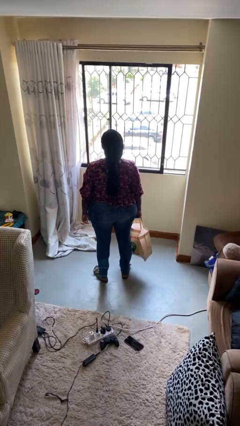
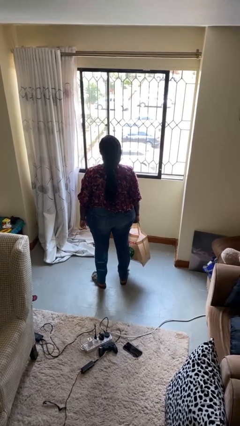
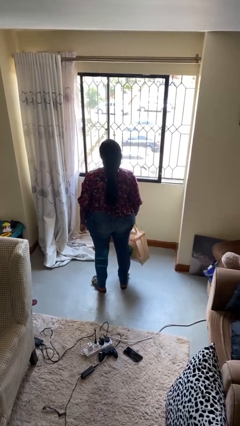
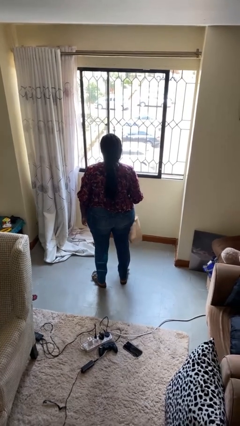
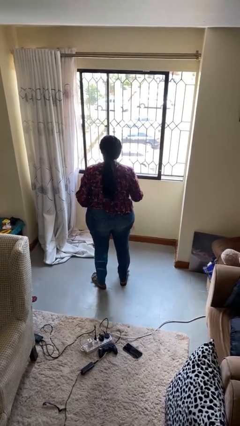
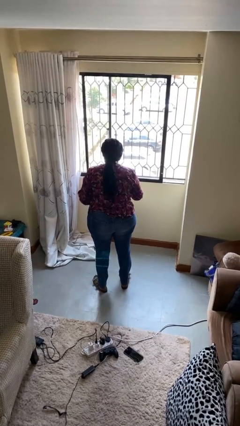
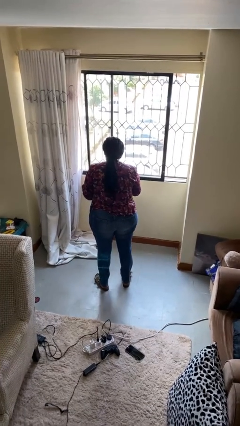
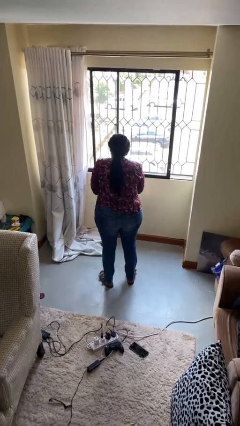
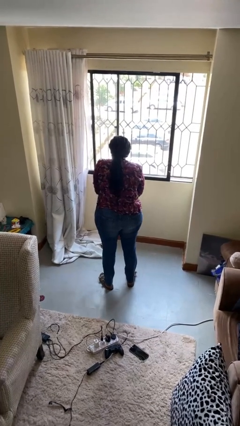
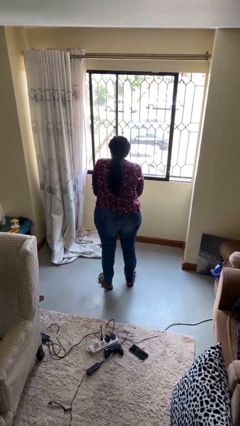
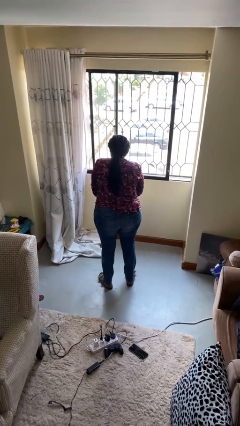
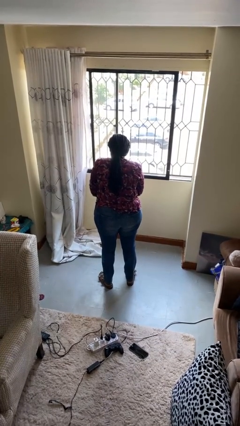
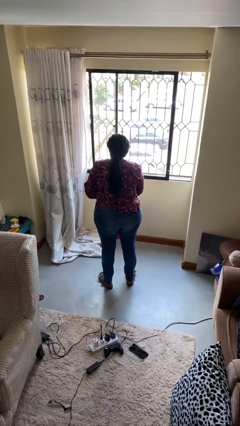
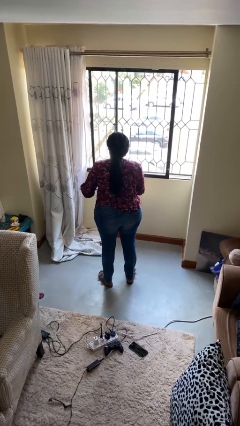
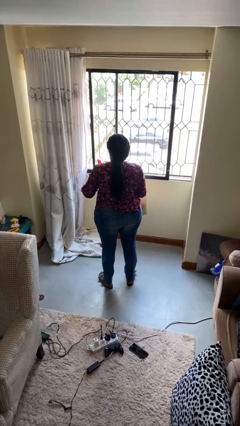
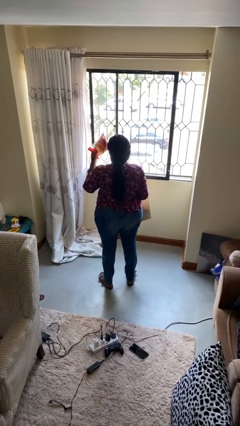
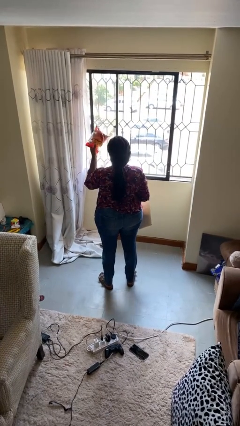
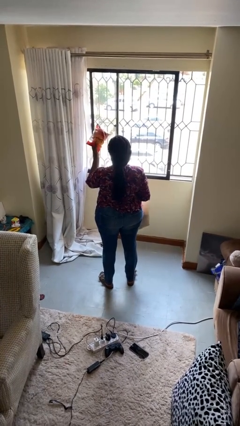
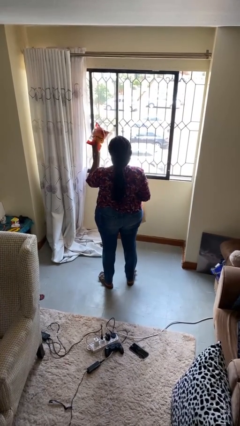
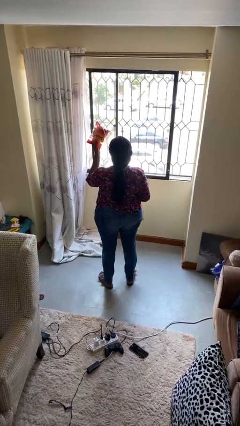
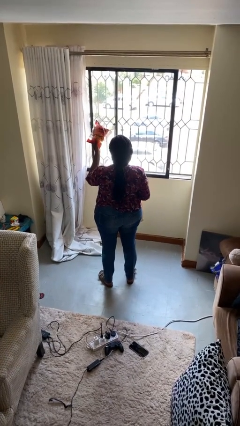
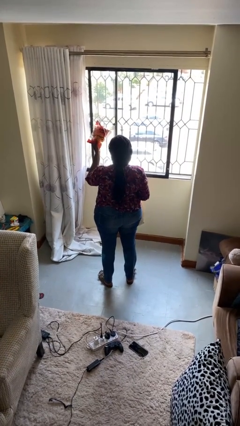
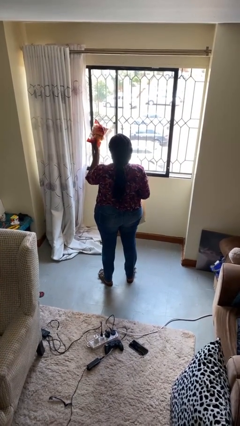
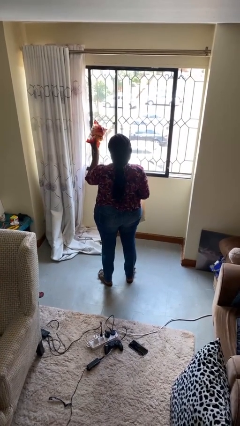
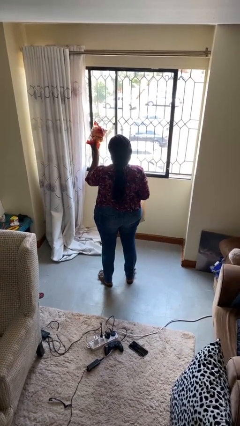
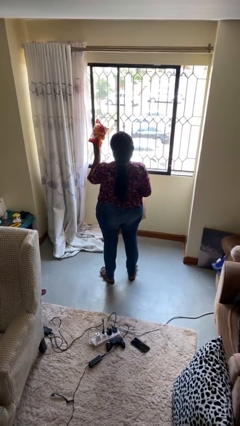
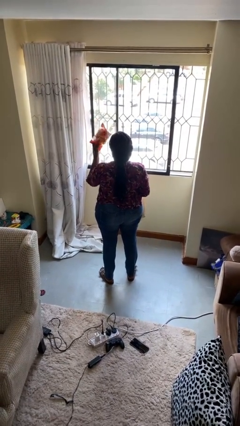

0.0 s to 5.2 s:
person takes object from bag

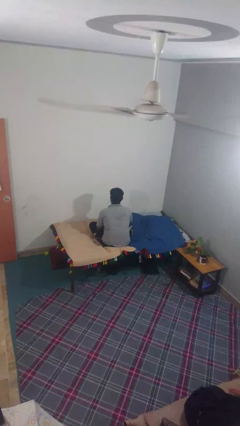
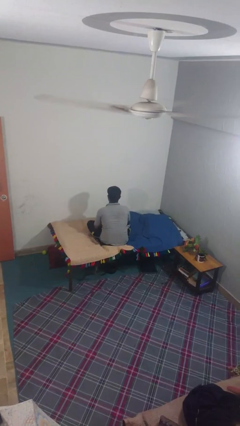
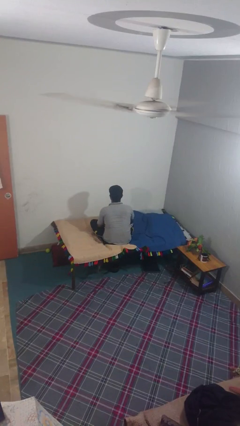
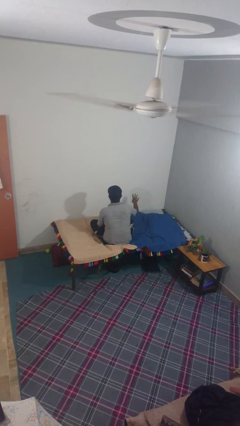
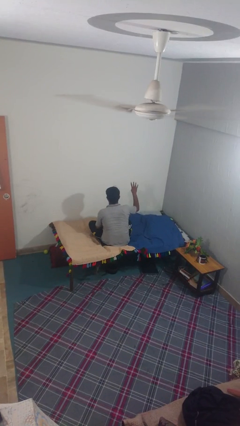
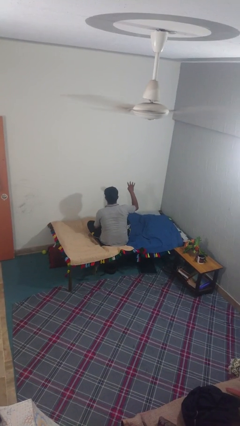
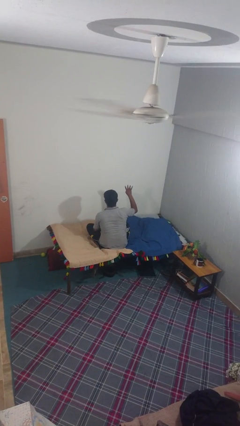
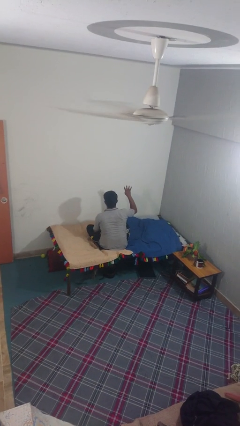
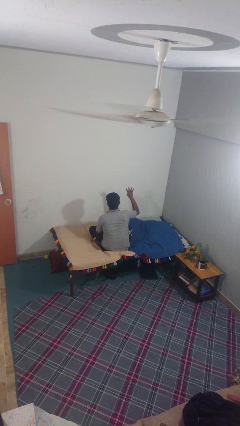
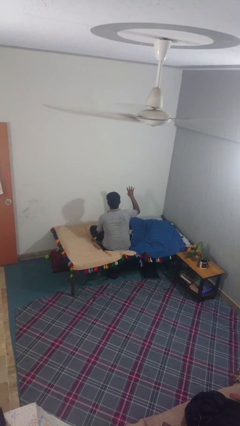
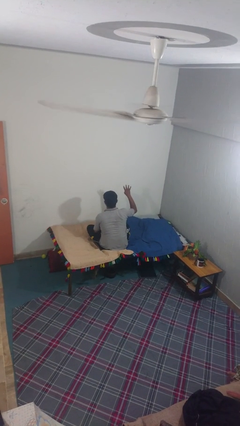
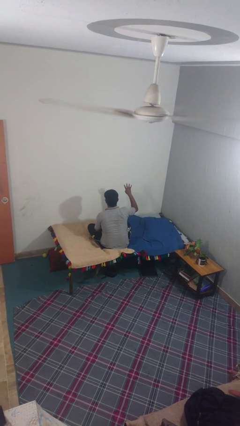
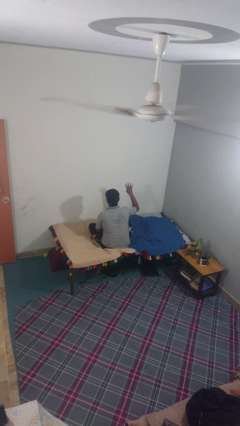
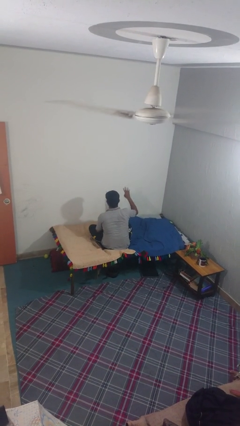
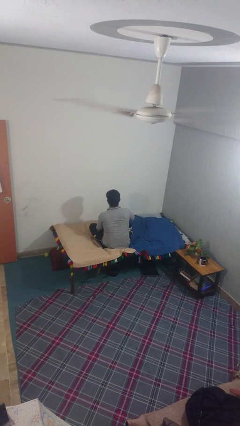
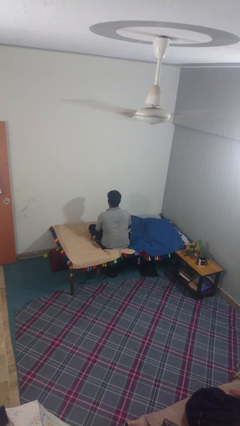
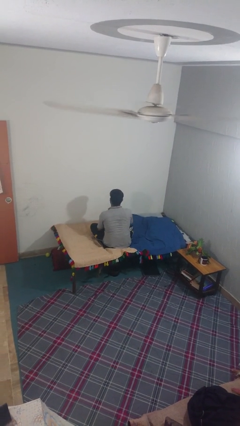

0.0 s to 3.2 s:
person gestures number four

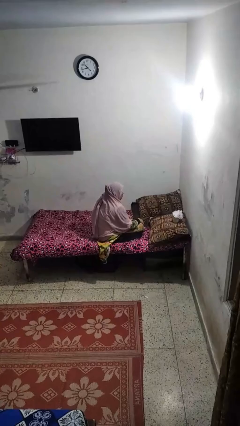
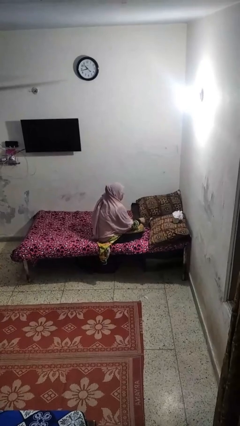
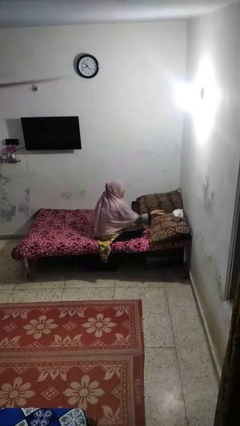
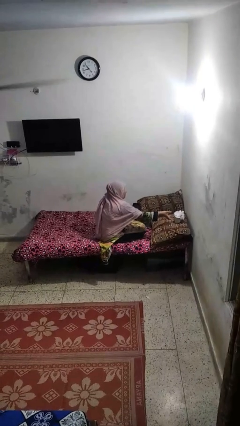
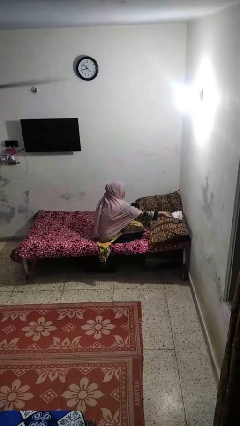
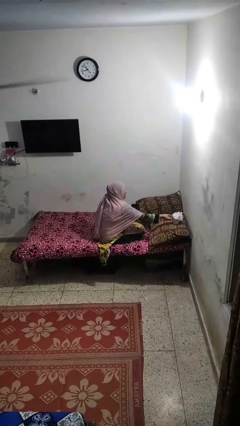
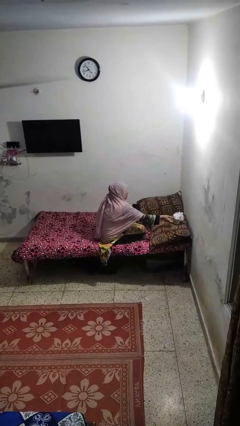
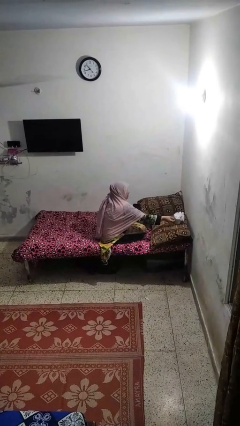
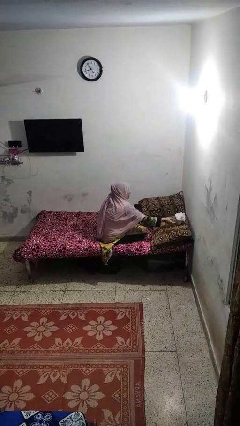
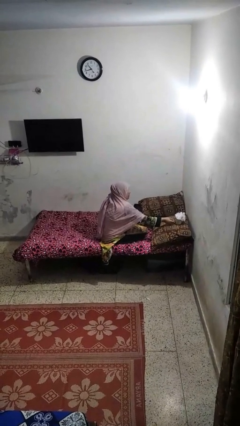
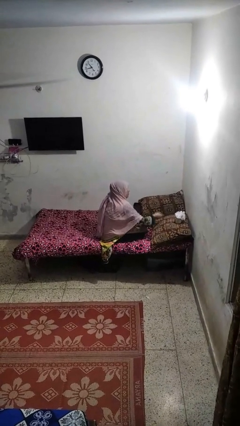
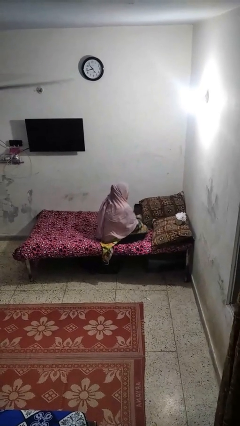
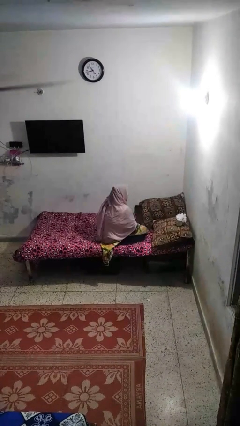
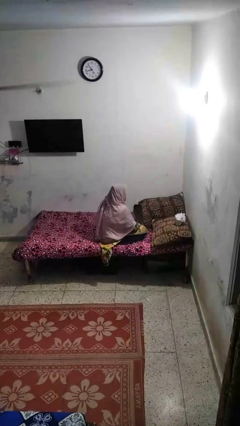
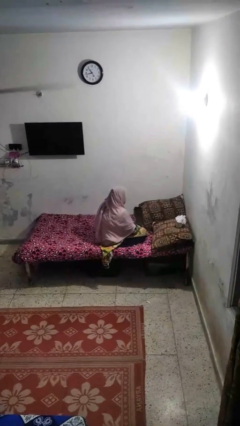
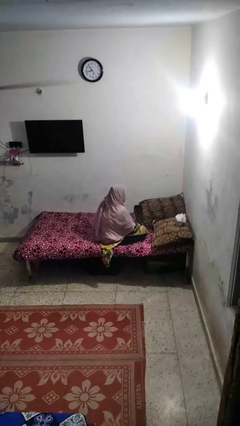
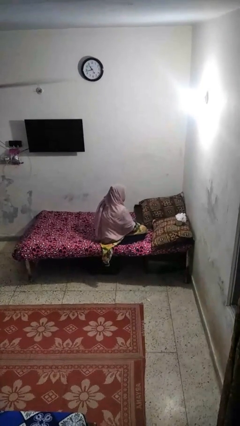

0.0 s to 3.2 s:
person arranges flowers in vase

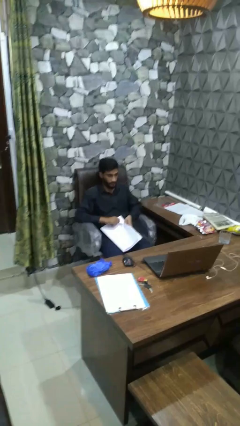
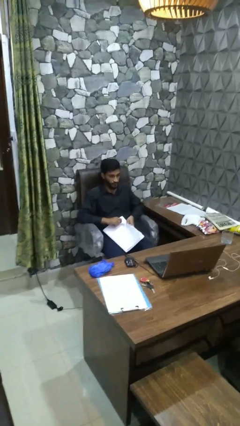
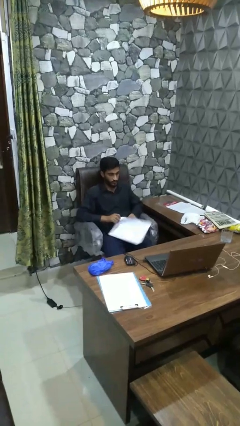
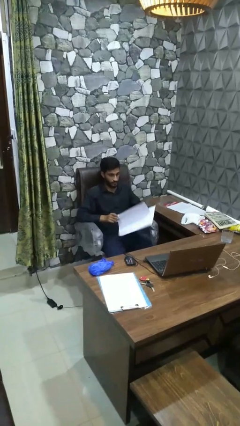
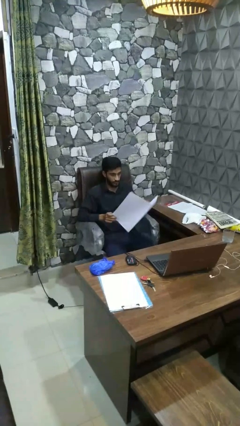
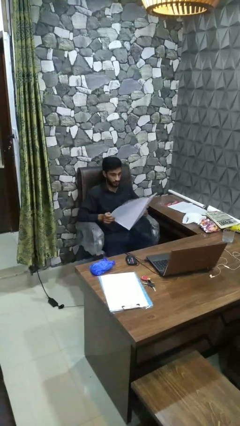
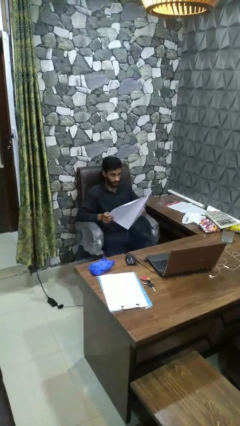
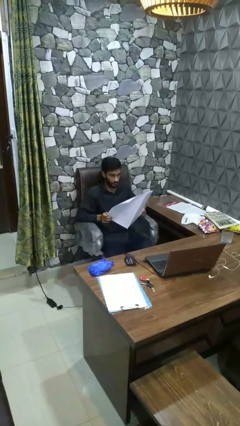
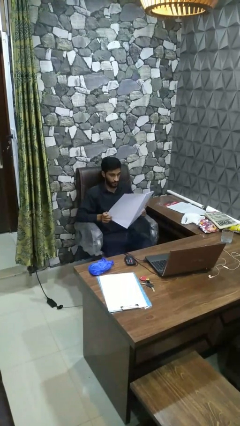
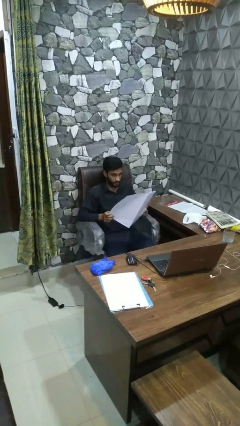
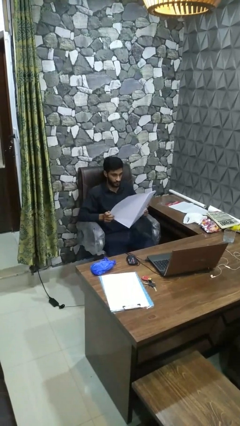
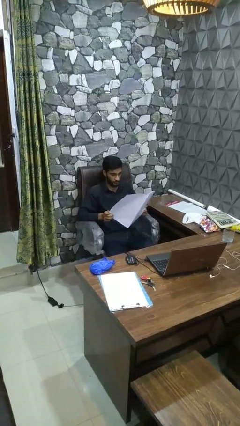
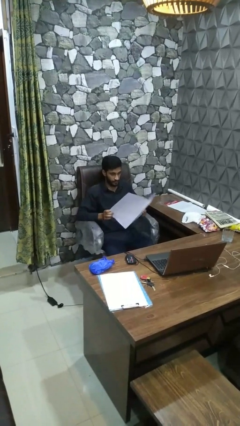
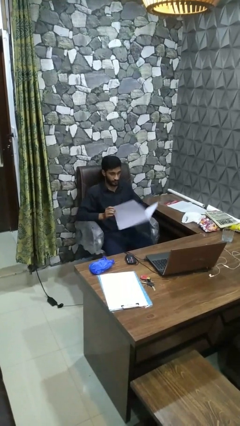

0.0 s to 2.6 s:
person reads magazine

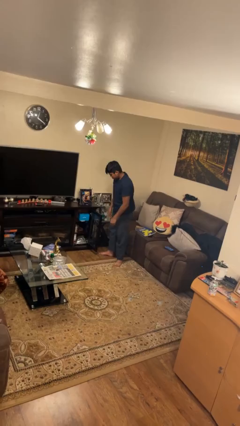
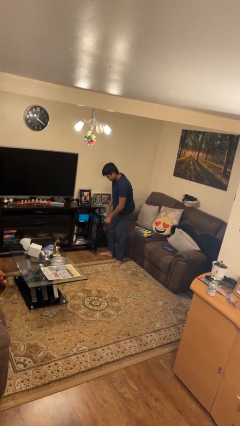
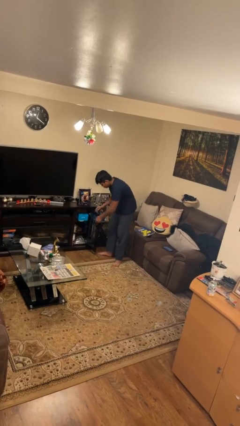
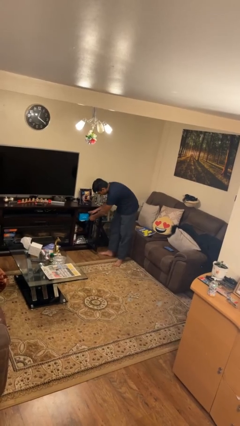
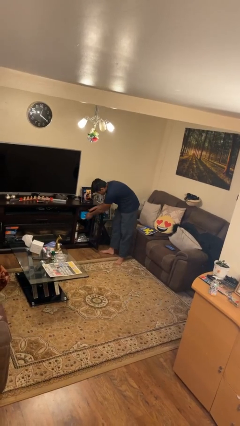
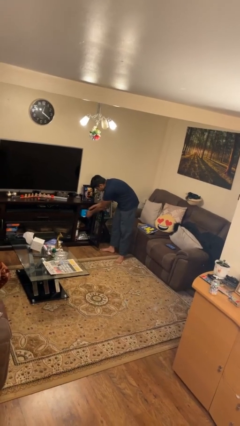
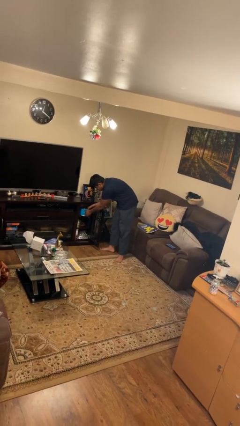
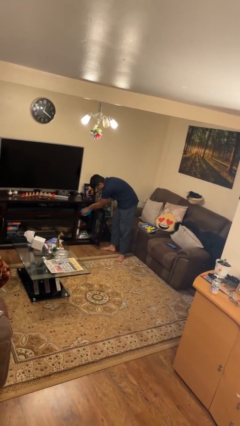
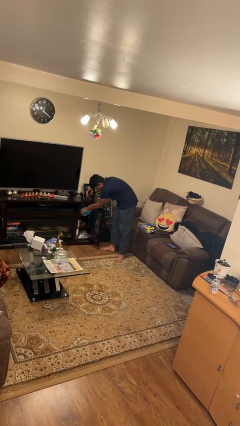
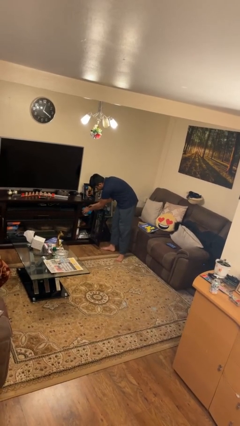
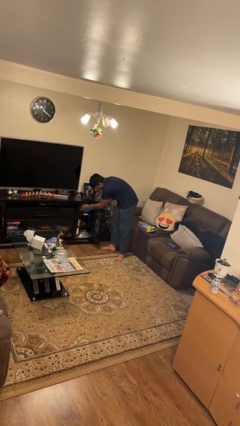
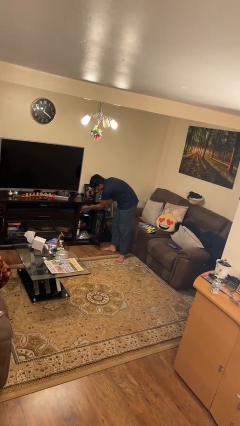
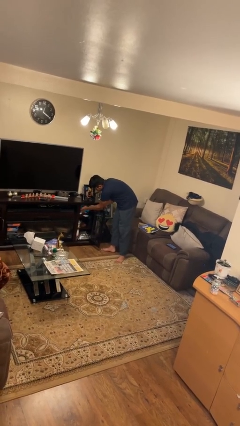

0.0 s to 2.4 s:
person searches in cabinet

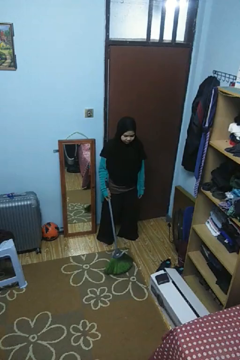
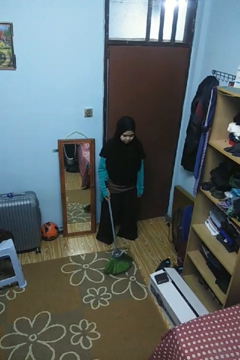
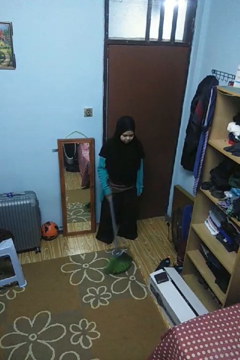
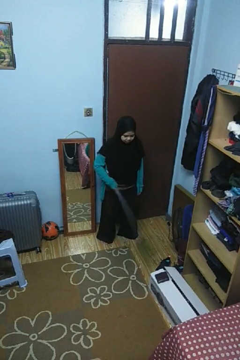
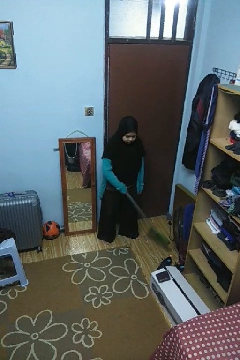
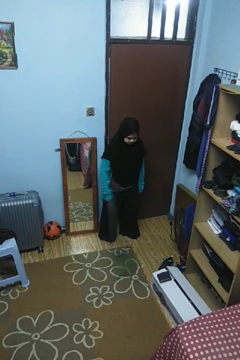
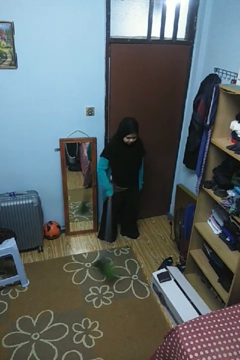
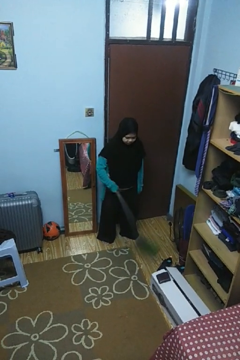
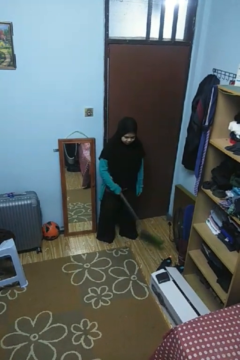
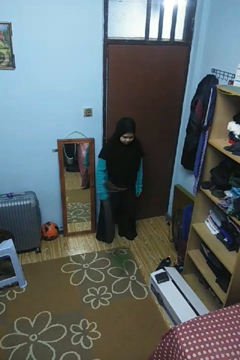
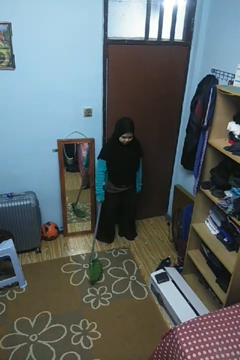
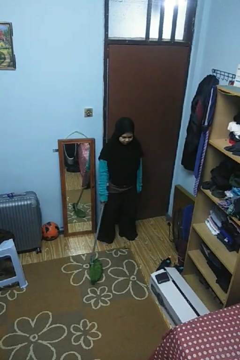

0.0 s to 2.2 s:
person sweeps floor
